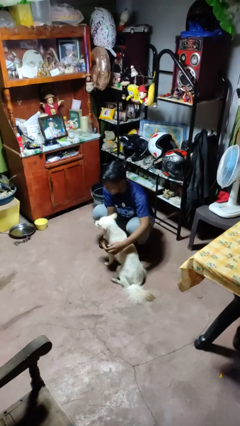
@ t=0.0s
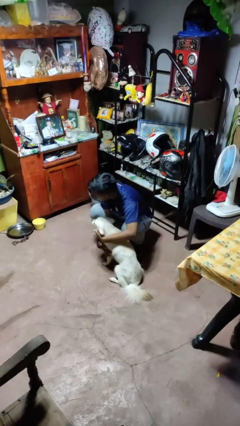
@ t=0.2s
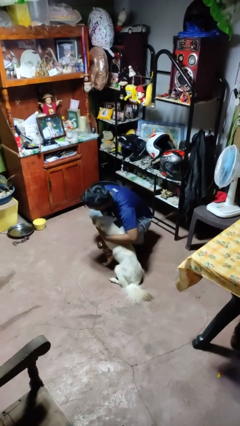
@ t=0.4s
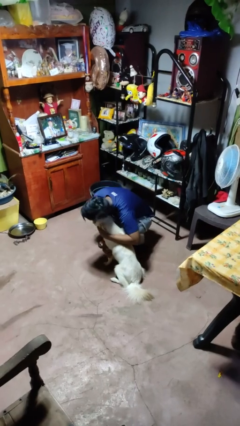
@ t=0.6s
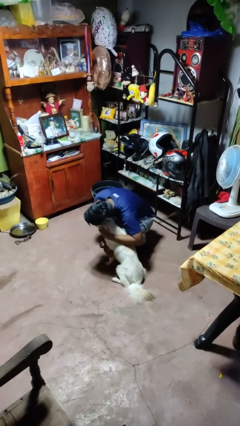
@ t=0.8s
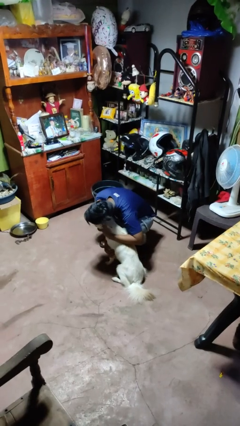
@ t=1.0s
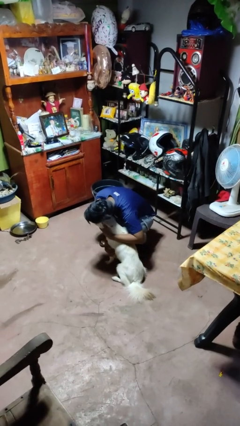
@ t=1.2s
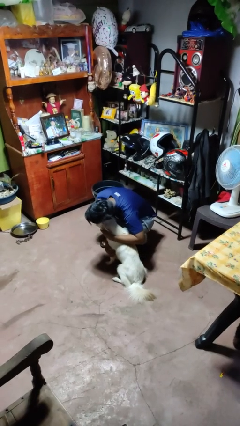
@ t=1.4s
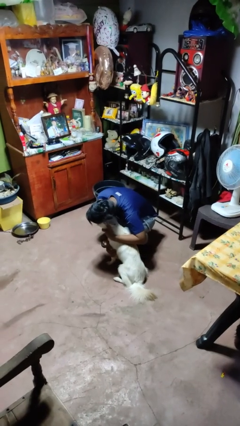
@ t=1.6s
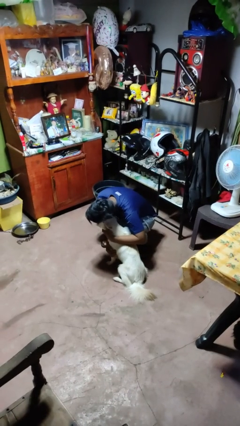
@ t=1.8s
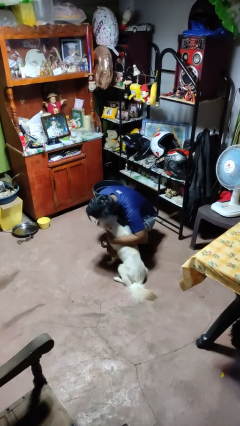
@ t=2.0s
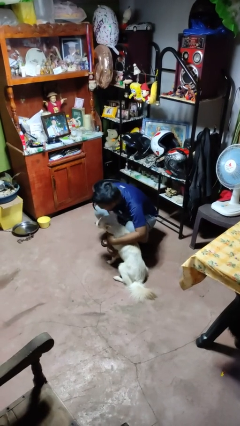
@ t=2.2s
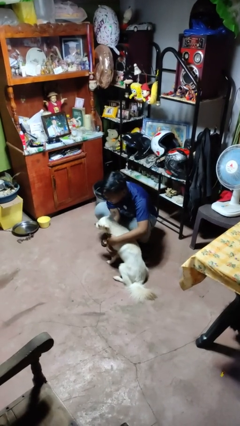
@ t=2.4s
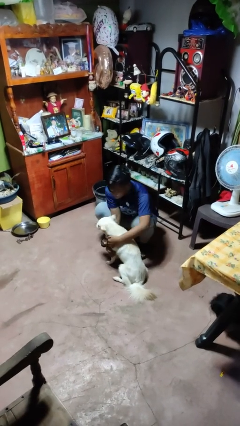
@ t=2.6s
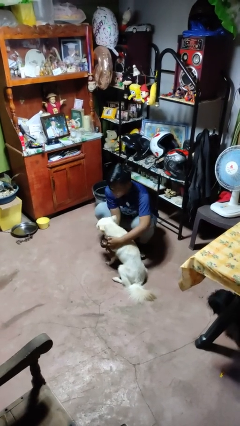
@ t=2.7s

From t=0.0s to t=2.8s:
person hugs dog

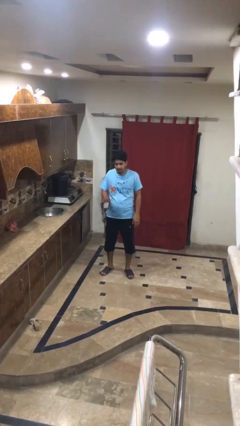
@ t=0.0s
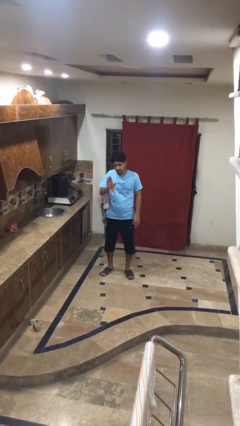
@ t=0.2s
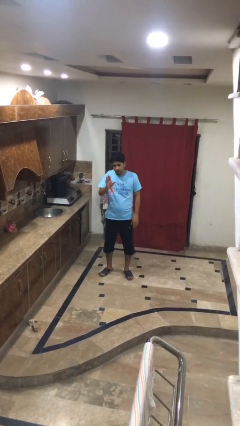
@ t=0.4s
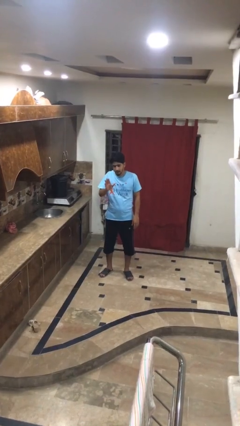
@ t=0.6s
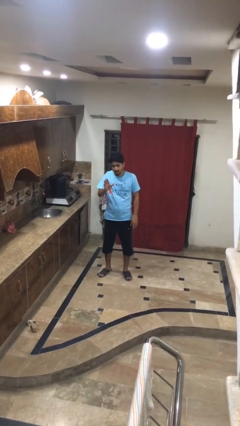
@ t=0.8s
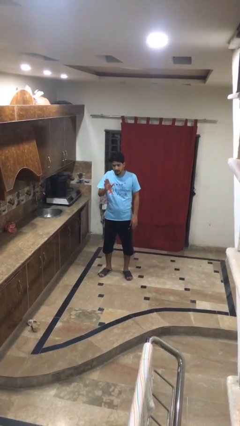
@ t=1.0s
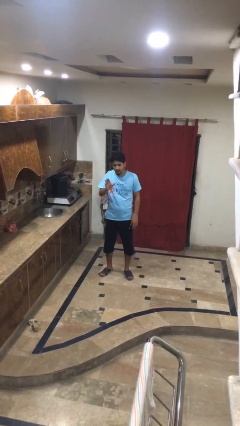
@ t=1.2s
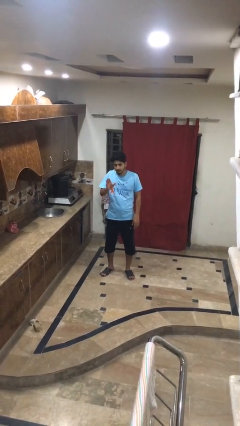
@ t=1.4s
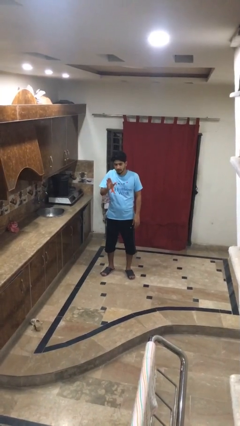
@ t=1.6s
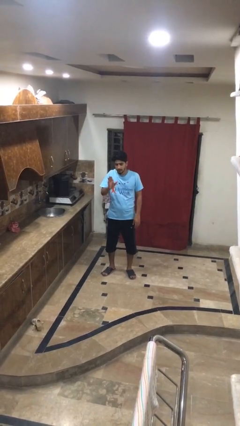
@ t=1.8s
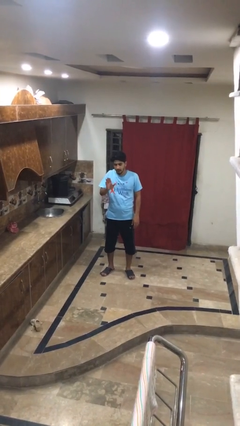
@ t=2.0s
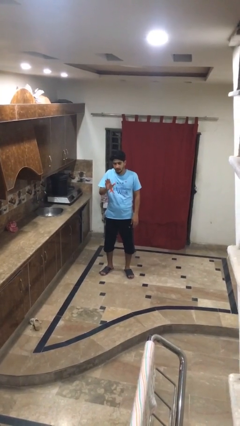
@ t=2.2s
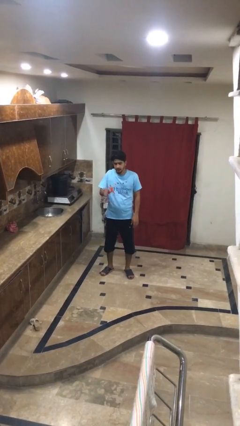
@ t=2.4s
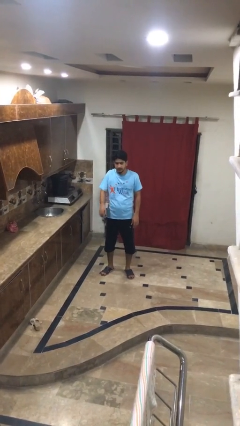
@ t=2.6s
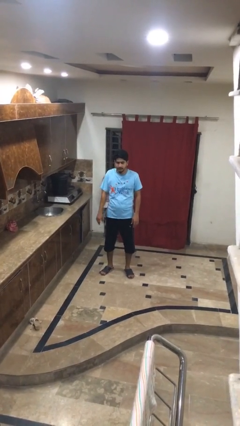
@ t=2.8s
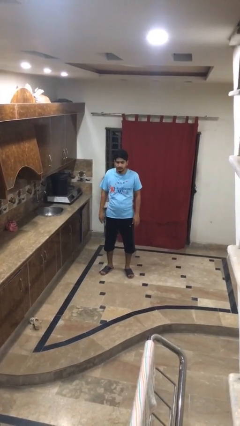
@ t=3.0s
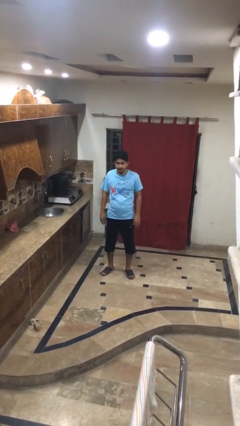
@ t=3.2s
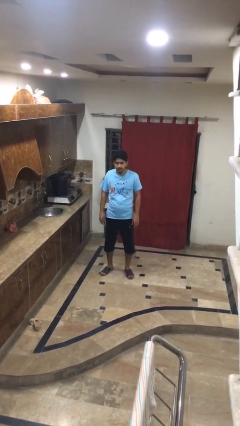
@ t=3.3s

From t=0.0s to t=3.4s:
person shrugs

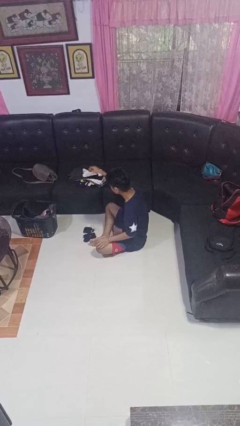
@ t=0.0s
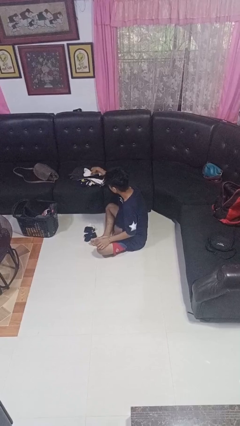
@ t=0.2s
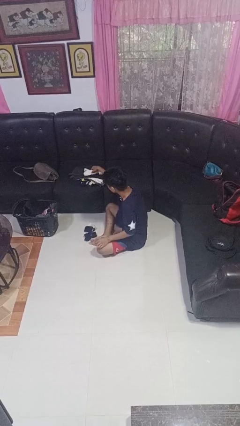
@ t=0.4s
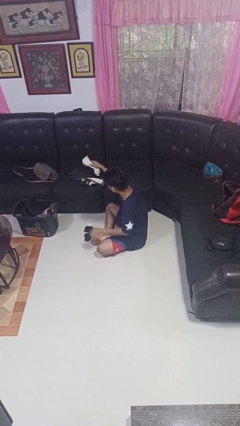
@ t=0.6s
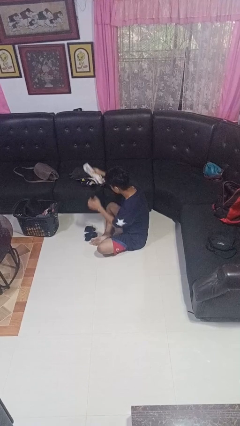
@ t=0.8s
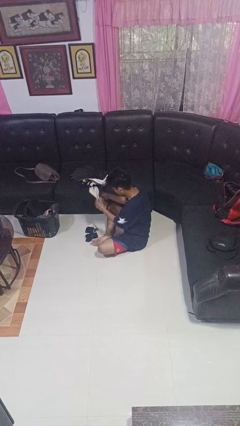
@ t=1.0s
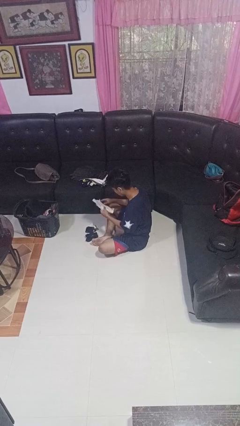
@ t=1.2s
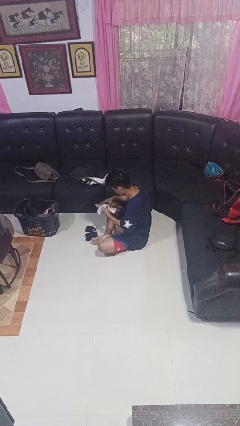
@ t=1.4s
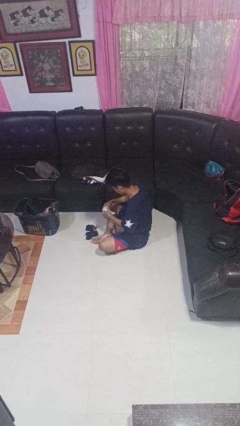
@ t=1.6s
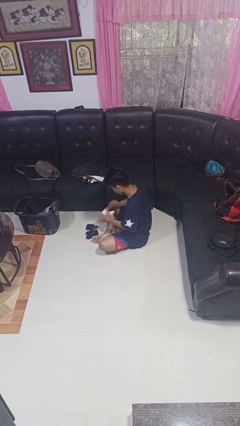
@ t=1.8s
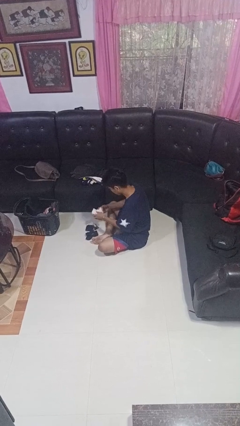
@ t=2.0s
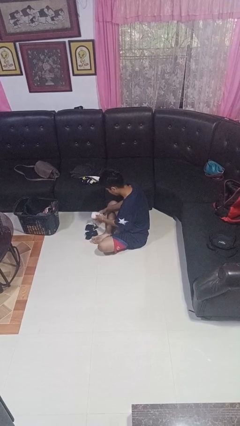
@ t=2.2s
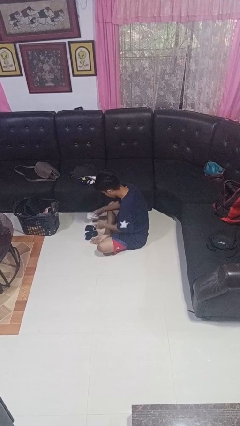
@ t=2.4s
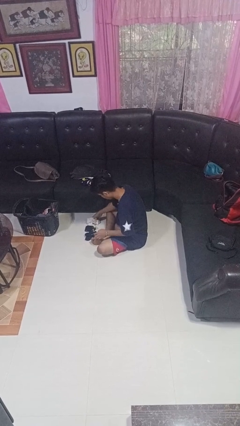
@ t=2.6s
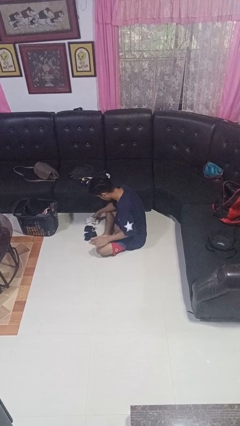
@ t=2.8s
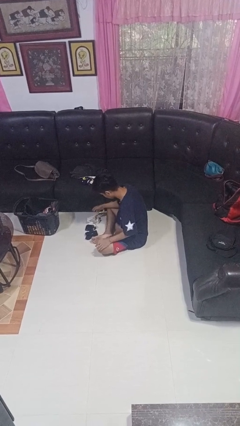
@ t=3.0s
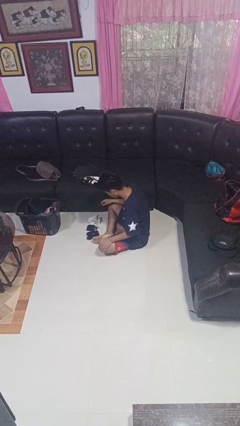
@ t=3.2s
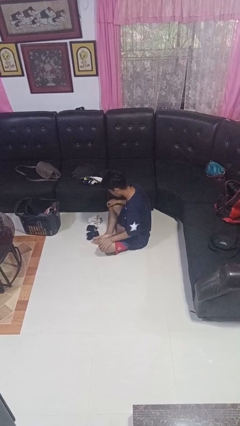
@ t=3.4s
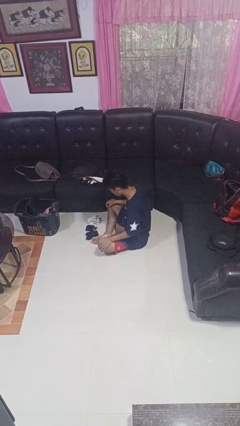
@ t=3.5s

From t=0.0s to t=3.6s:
person folds socks

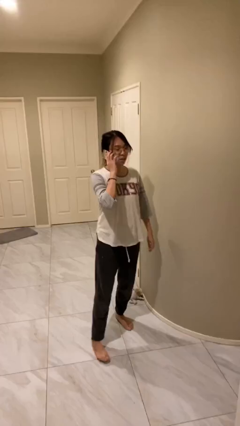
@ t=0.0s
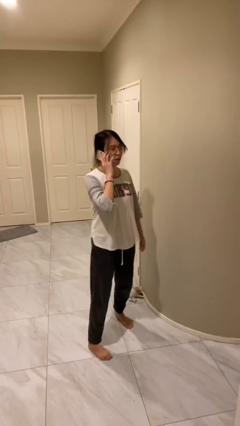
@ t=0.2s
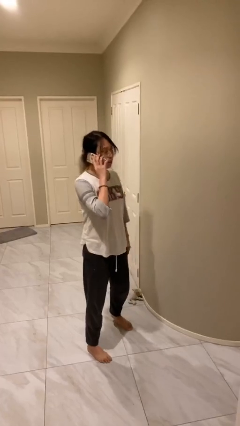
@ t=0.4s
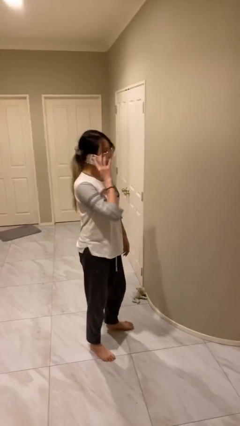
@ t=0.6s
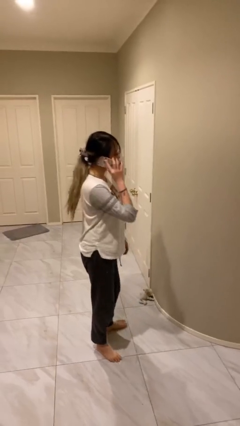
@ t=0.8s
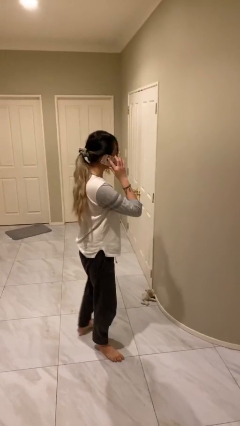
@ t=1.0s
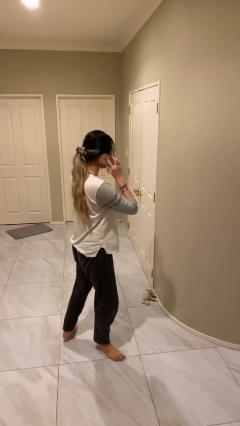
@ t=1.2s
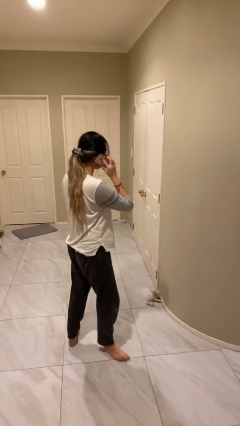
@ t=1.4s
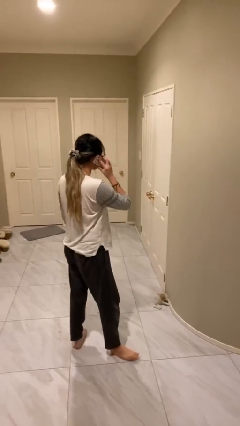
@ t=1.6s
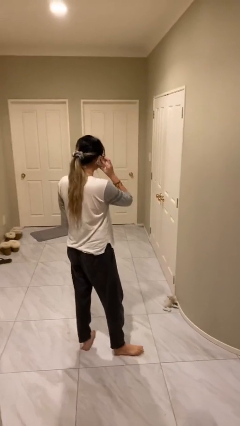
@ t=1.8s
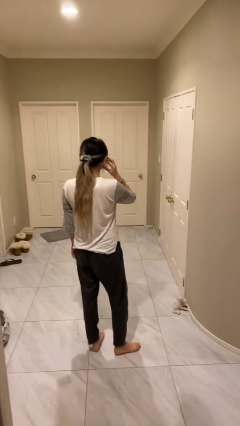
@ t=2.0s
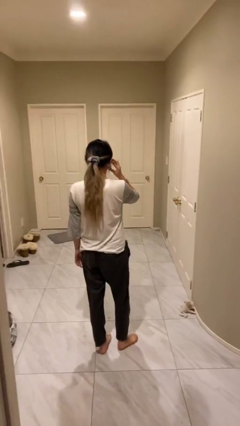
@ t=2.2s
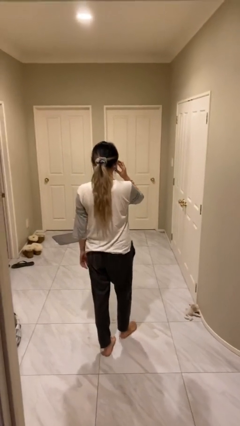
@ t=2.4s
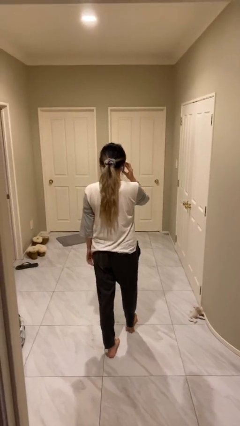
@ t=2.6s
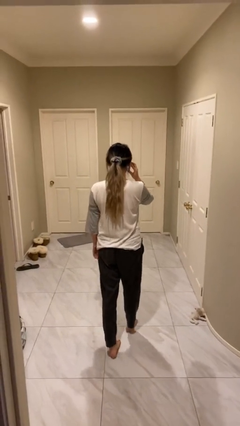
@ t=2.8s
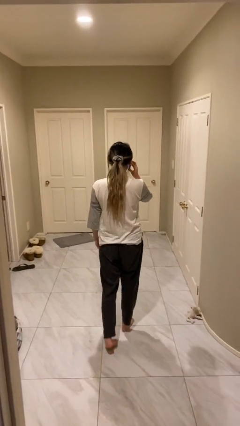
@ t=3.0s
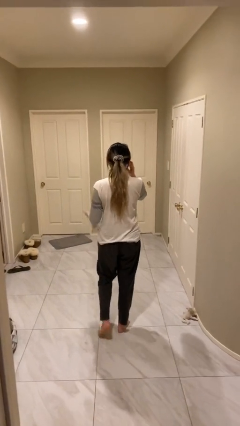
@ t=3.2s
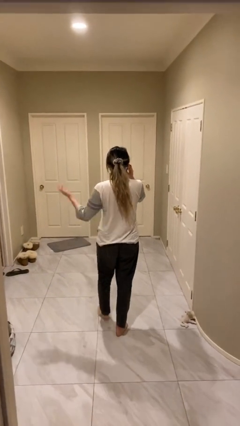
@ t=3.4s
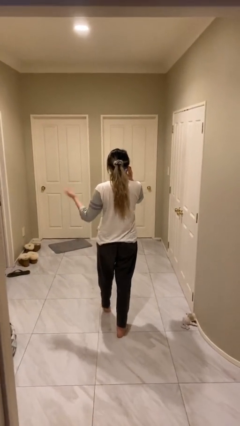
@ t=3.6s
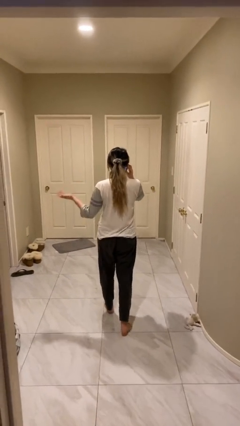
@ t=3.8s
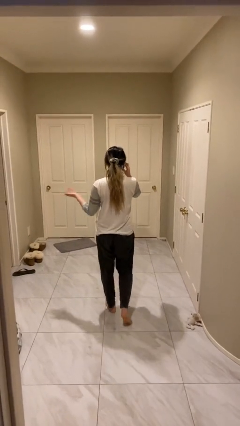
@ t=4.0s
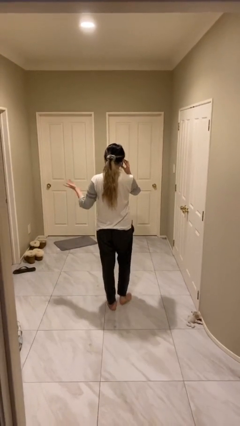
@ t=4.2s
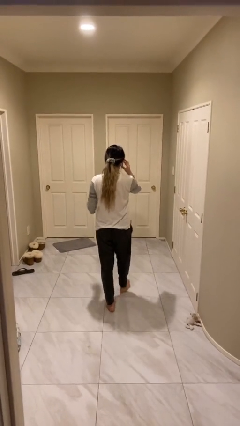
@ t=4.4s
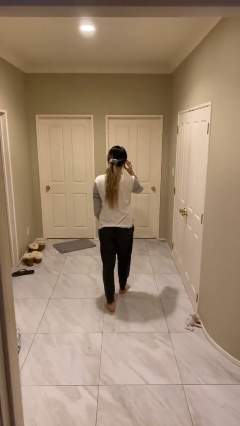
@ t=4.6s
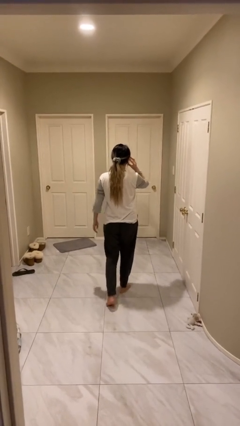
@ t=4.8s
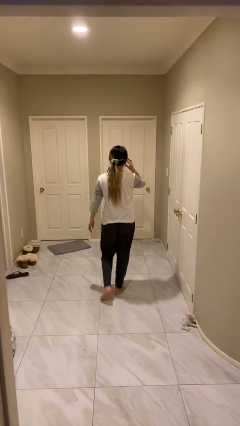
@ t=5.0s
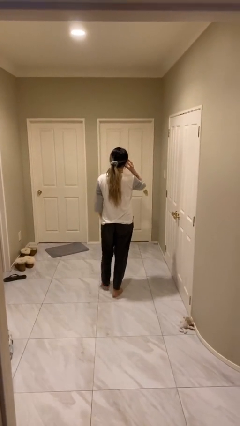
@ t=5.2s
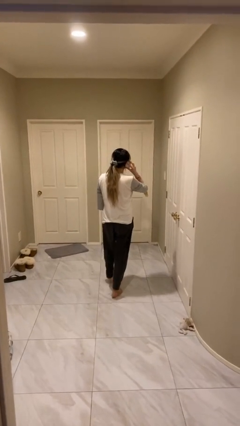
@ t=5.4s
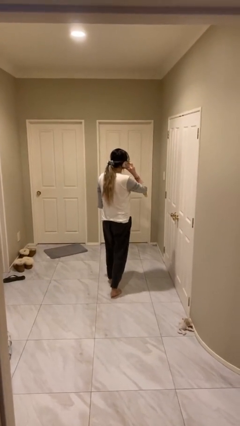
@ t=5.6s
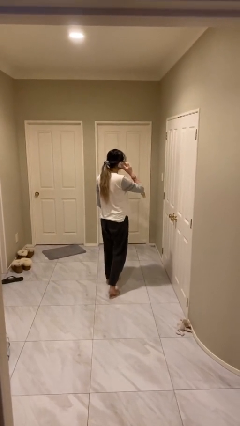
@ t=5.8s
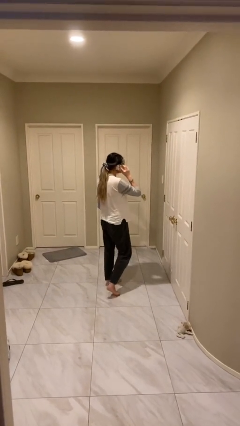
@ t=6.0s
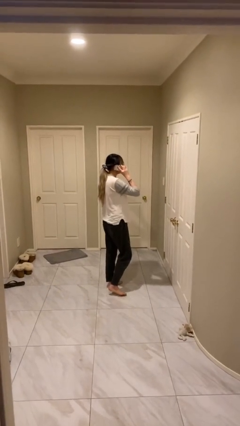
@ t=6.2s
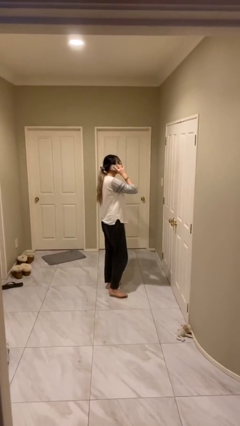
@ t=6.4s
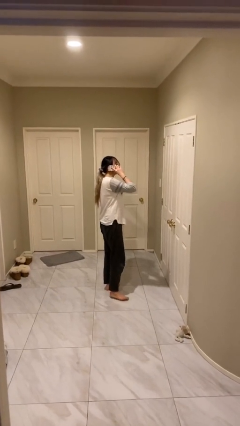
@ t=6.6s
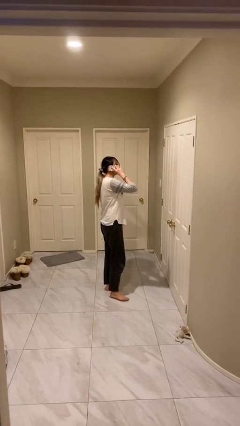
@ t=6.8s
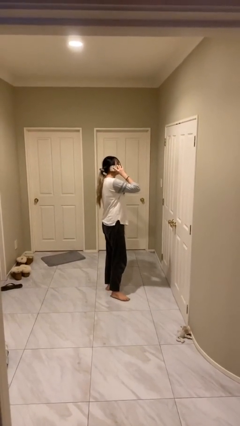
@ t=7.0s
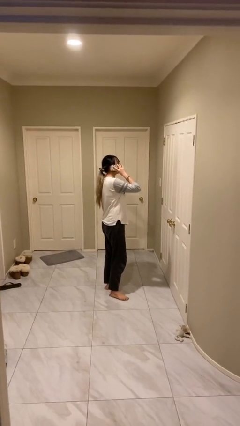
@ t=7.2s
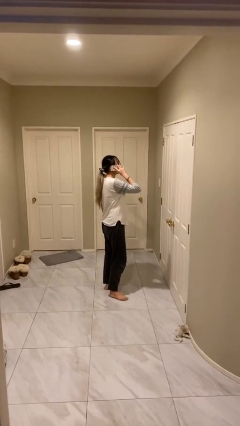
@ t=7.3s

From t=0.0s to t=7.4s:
person talks on phone

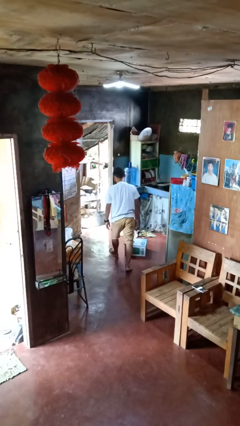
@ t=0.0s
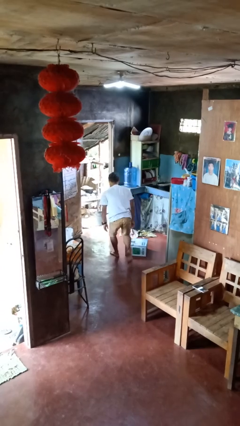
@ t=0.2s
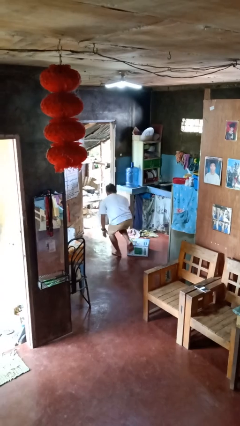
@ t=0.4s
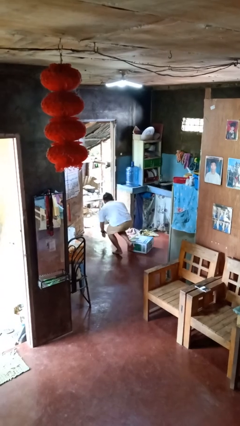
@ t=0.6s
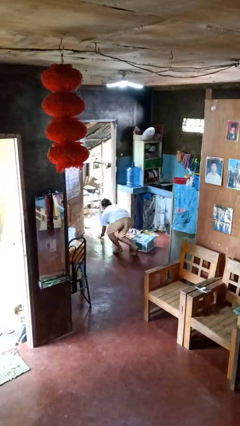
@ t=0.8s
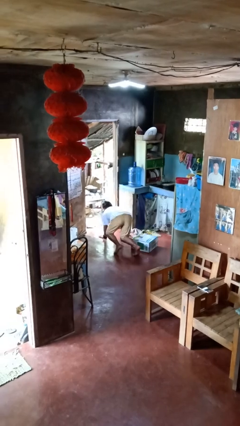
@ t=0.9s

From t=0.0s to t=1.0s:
person trips on object on floor
